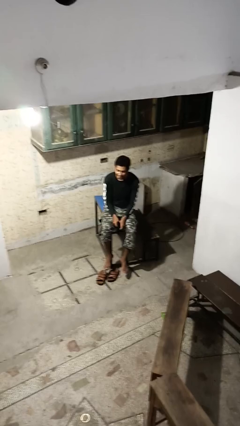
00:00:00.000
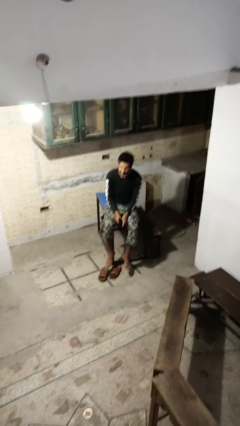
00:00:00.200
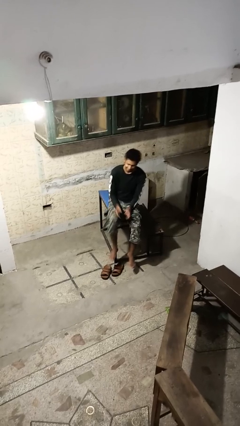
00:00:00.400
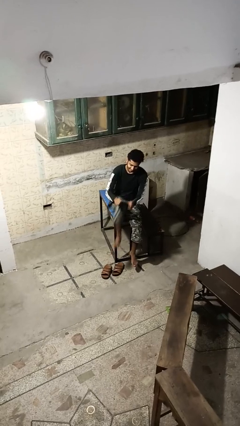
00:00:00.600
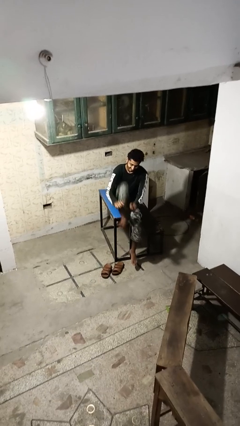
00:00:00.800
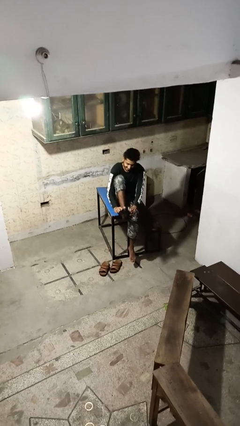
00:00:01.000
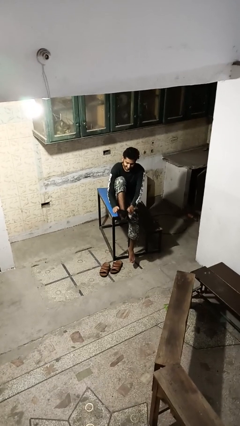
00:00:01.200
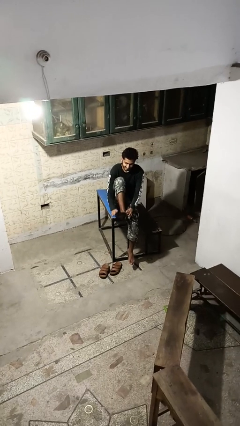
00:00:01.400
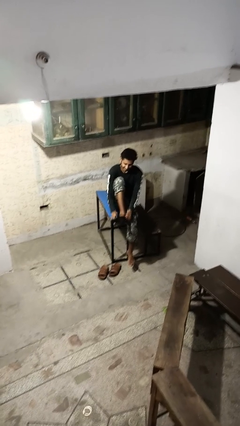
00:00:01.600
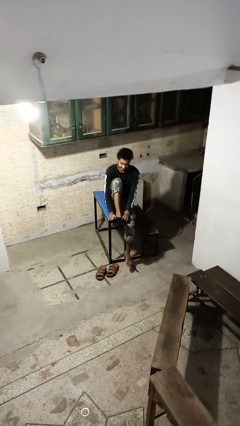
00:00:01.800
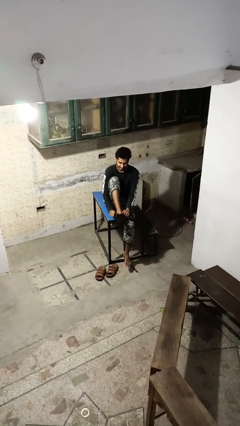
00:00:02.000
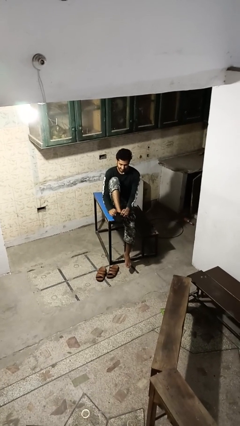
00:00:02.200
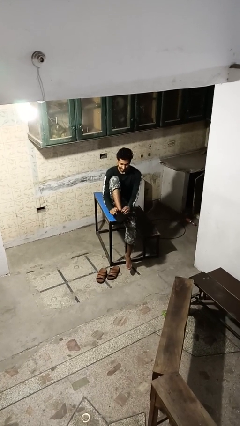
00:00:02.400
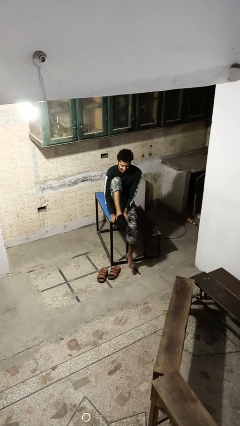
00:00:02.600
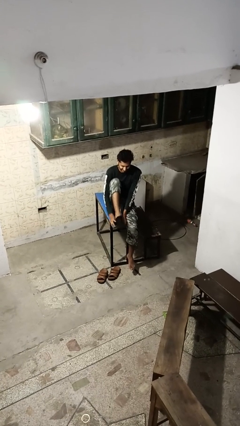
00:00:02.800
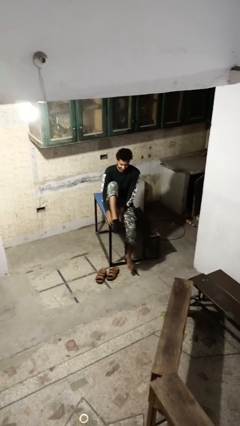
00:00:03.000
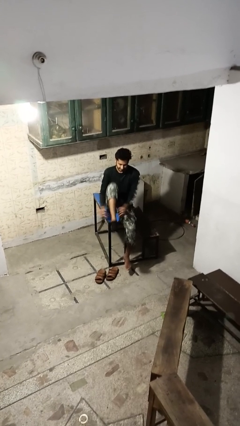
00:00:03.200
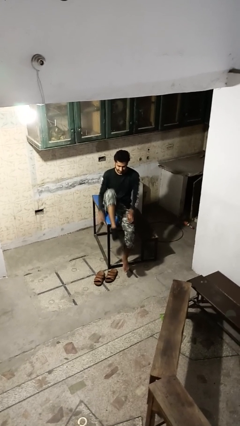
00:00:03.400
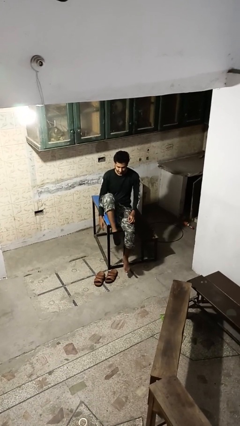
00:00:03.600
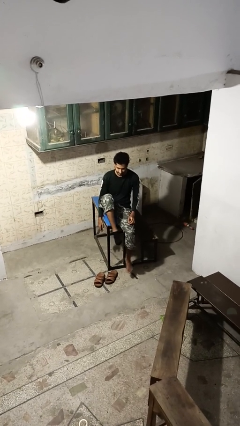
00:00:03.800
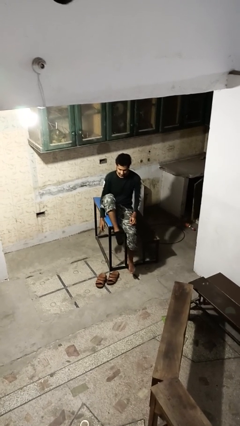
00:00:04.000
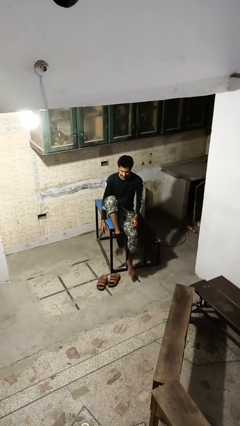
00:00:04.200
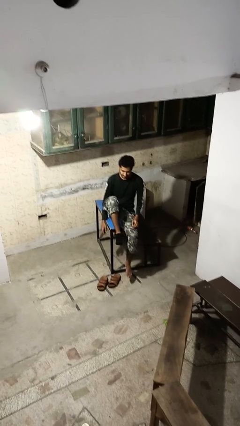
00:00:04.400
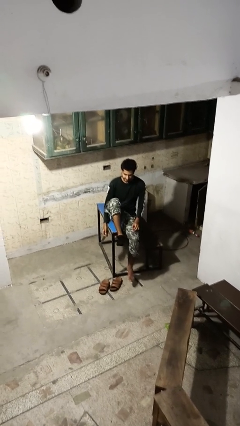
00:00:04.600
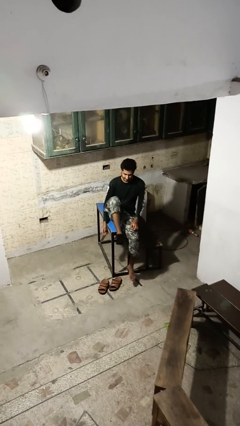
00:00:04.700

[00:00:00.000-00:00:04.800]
person puts on socks

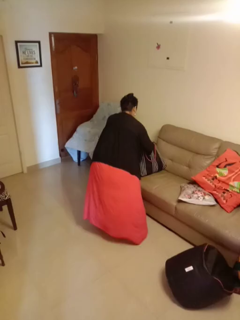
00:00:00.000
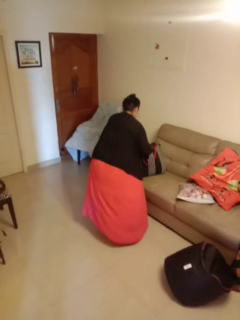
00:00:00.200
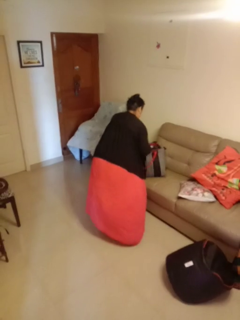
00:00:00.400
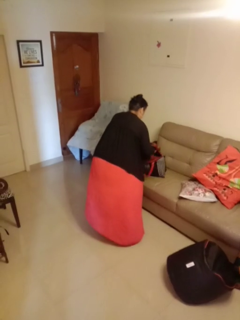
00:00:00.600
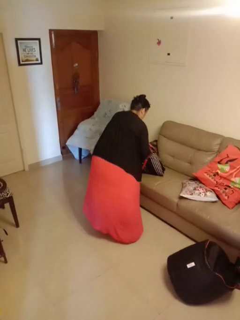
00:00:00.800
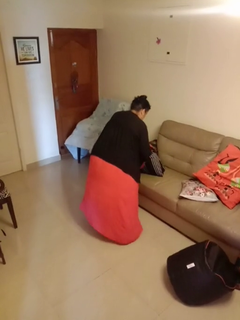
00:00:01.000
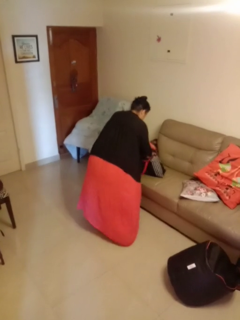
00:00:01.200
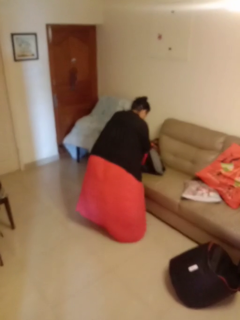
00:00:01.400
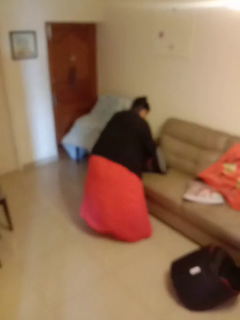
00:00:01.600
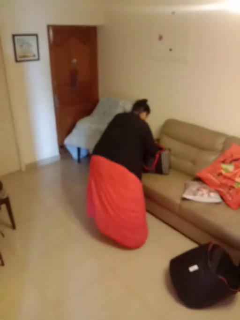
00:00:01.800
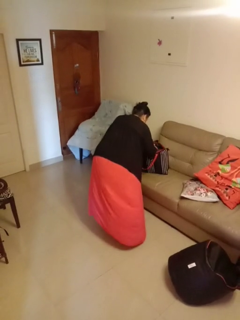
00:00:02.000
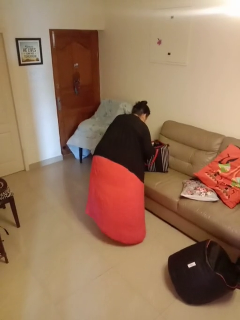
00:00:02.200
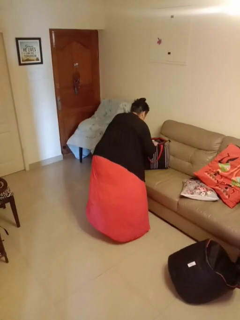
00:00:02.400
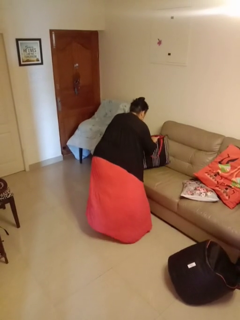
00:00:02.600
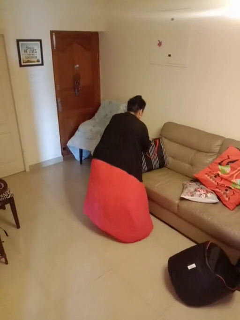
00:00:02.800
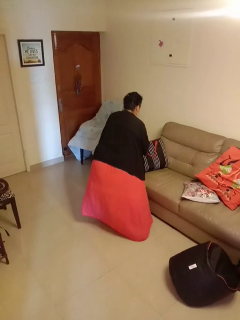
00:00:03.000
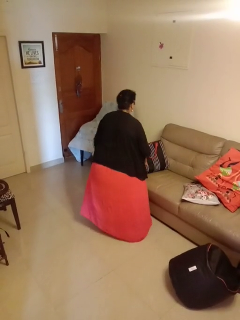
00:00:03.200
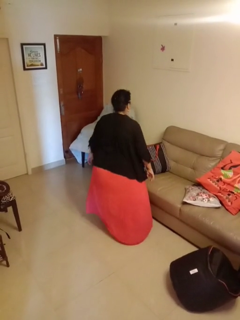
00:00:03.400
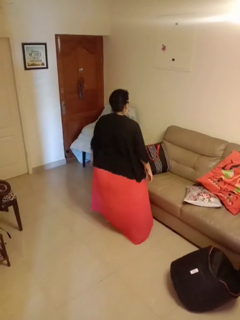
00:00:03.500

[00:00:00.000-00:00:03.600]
person searches in bag

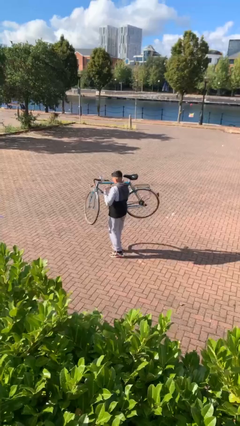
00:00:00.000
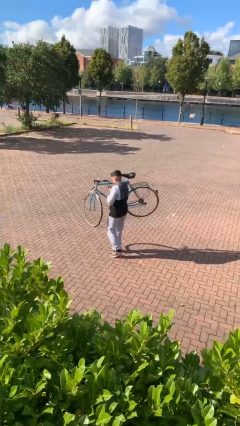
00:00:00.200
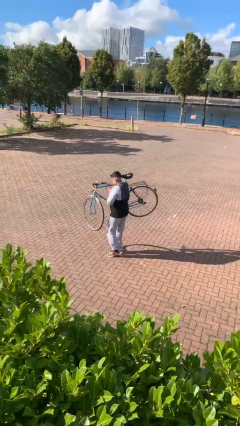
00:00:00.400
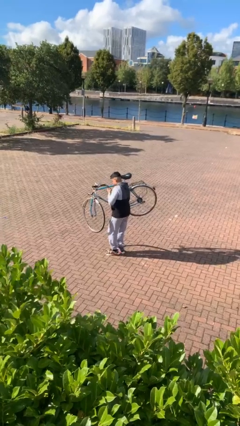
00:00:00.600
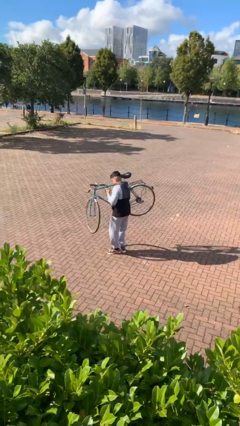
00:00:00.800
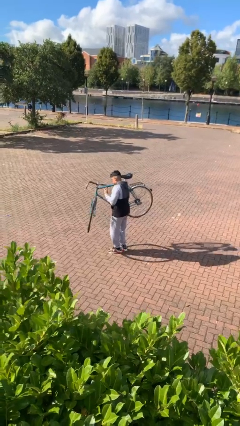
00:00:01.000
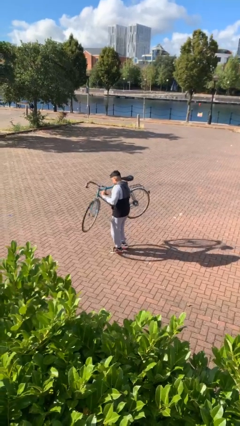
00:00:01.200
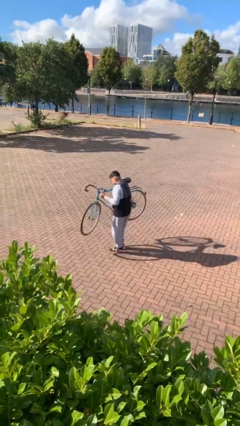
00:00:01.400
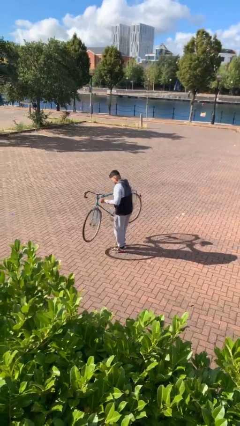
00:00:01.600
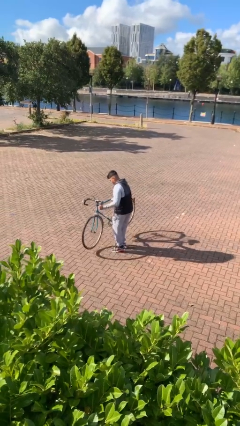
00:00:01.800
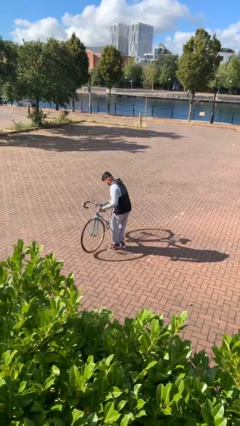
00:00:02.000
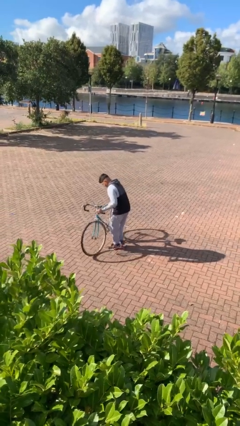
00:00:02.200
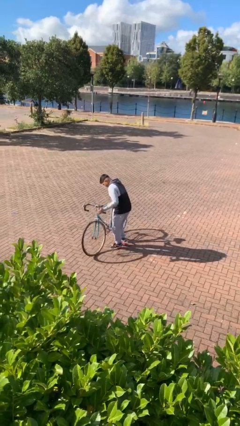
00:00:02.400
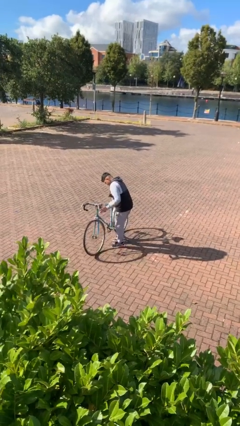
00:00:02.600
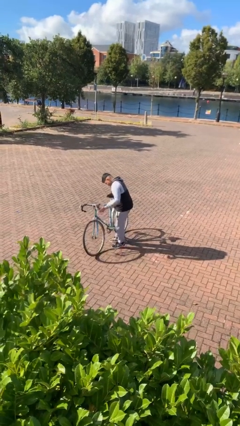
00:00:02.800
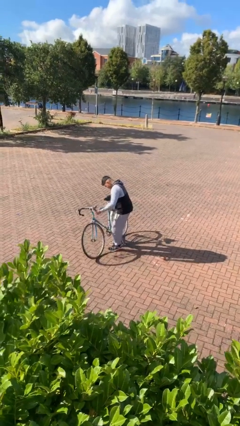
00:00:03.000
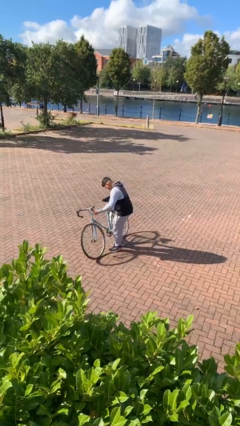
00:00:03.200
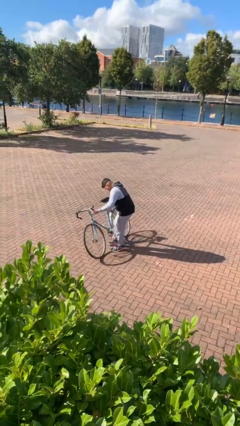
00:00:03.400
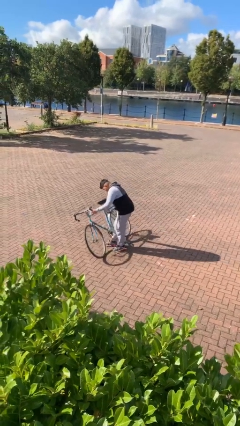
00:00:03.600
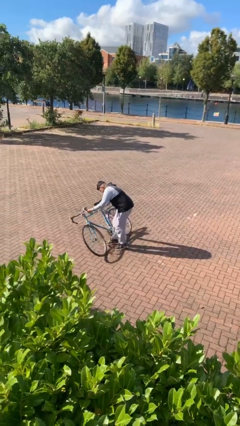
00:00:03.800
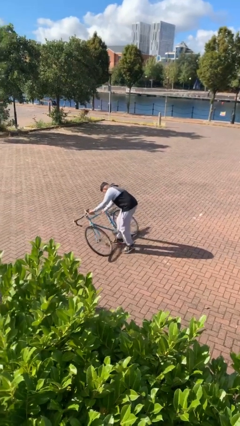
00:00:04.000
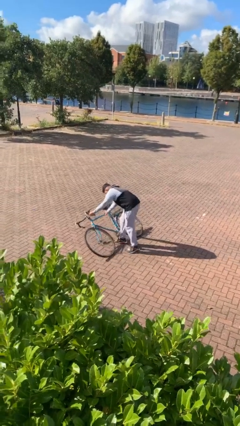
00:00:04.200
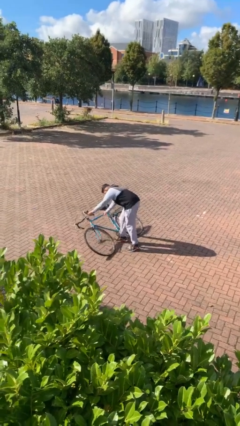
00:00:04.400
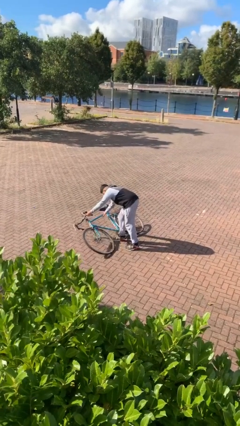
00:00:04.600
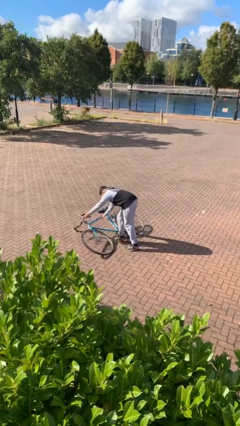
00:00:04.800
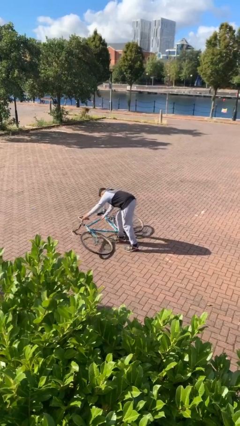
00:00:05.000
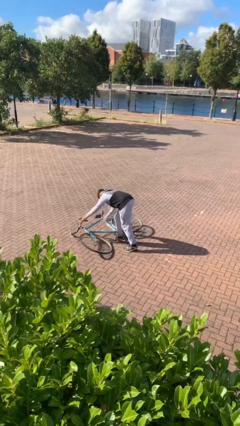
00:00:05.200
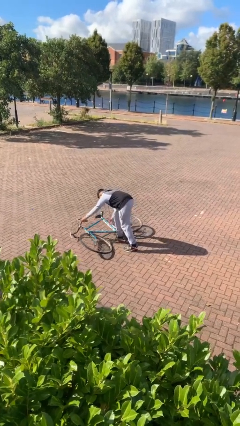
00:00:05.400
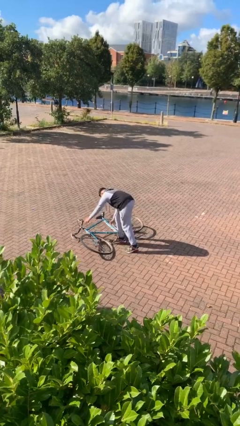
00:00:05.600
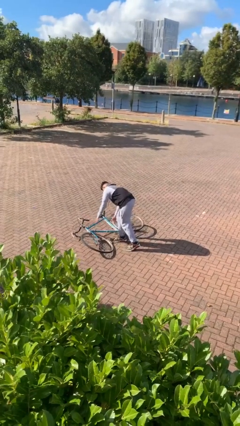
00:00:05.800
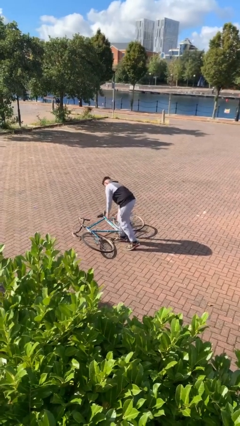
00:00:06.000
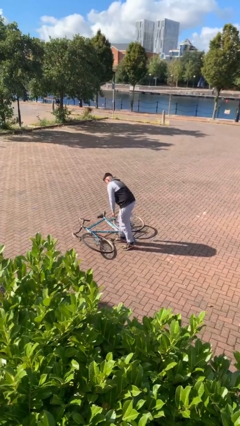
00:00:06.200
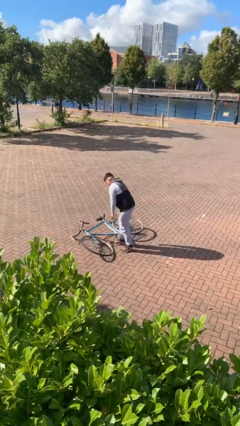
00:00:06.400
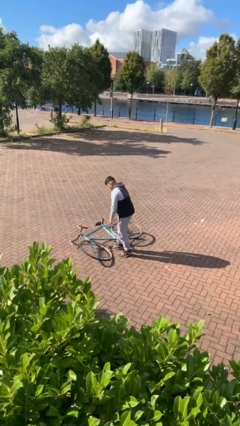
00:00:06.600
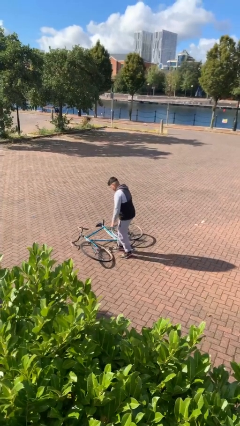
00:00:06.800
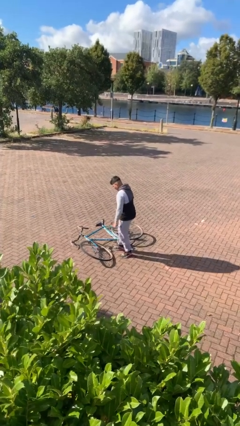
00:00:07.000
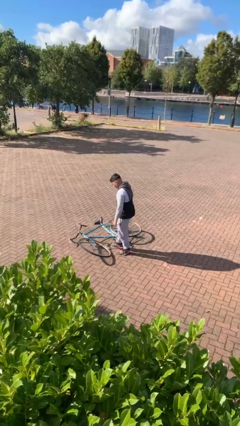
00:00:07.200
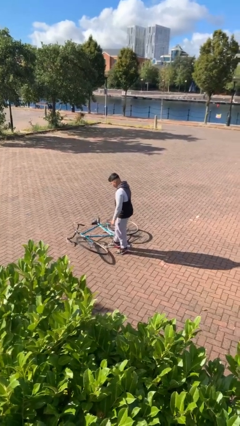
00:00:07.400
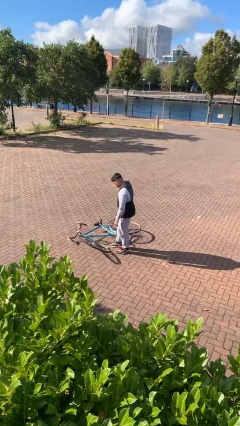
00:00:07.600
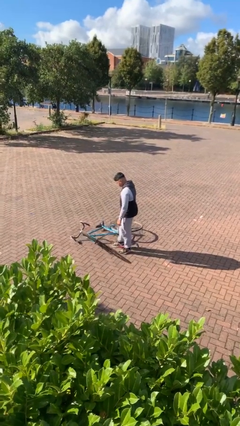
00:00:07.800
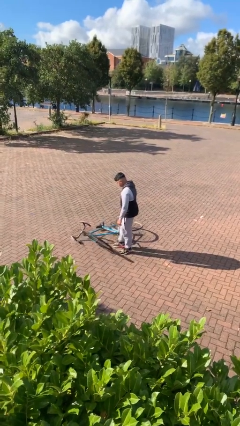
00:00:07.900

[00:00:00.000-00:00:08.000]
person puts down object on floor

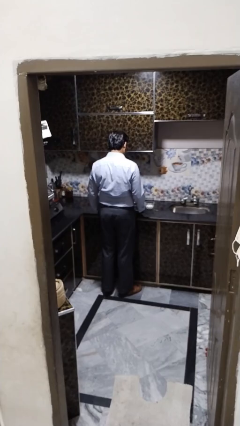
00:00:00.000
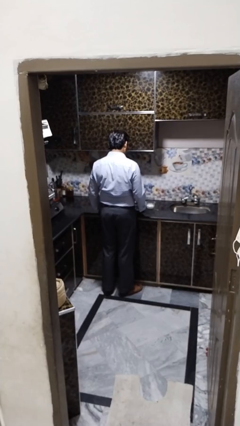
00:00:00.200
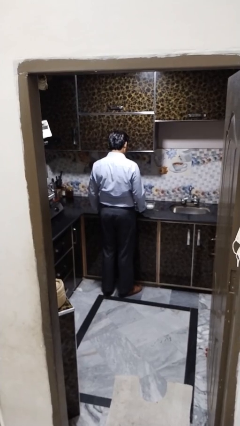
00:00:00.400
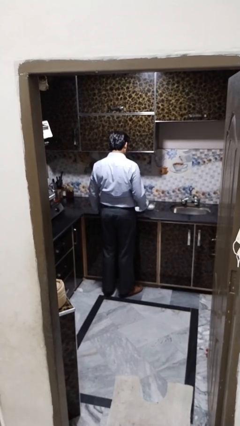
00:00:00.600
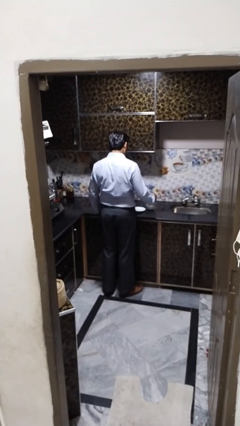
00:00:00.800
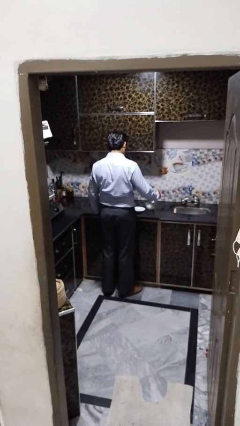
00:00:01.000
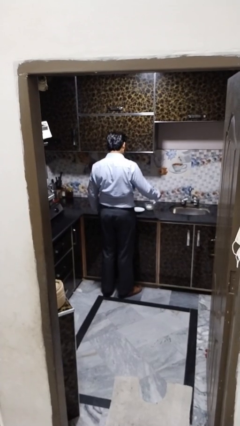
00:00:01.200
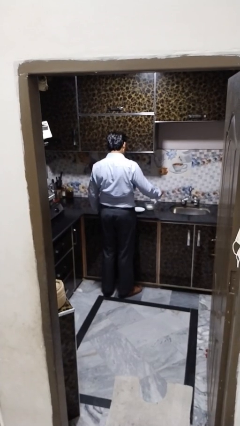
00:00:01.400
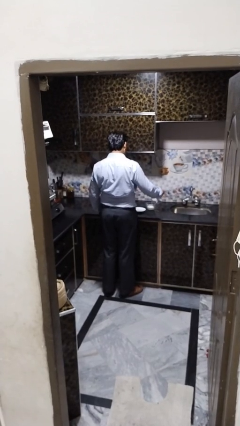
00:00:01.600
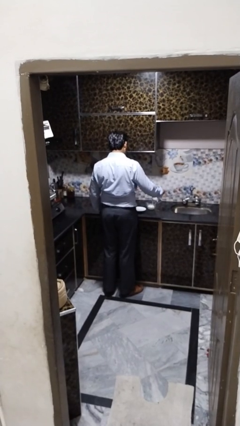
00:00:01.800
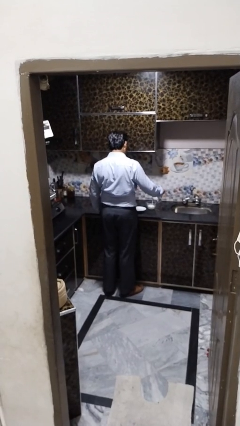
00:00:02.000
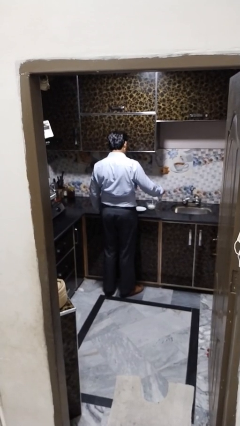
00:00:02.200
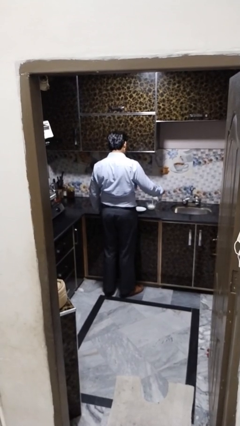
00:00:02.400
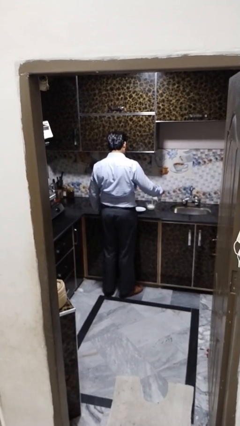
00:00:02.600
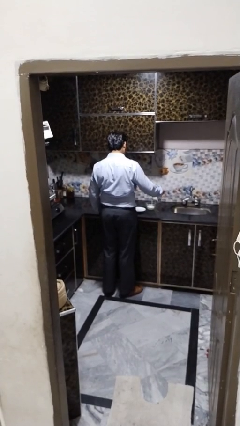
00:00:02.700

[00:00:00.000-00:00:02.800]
person pours into bowl
